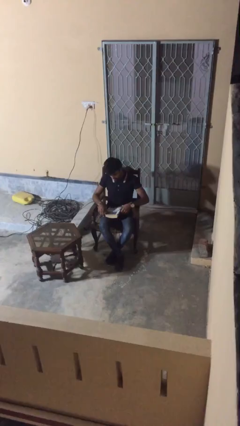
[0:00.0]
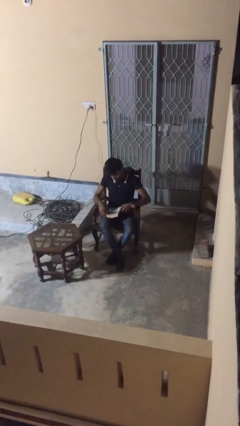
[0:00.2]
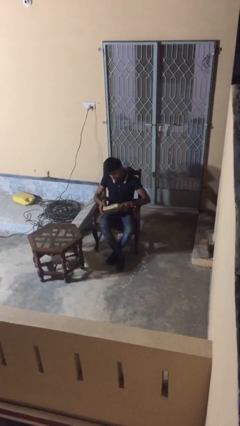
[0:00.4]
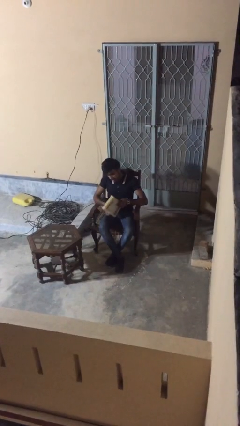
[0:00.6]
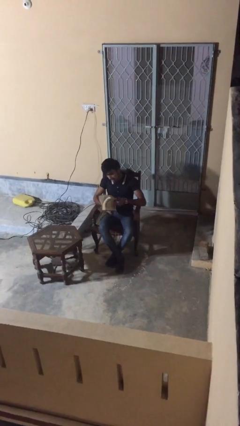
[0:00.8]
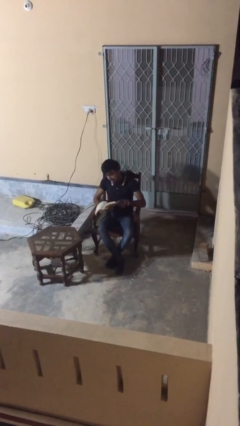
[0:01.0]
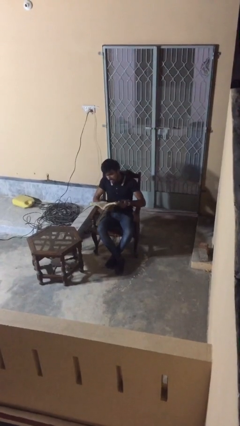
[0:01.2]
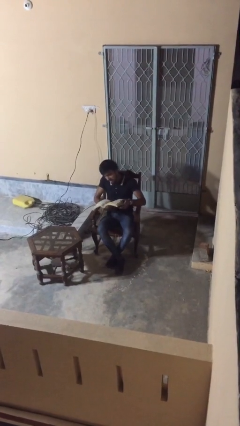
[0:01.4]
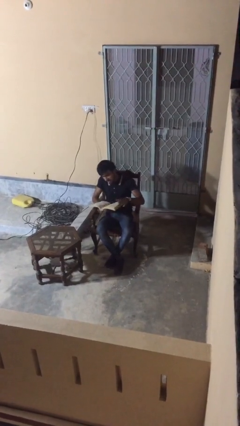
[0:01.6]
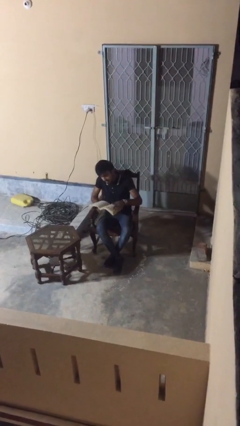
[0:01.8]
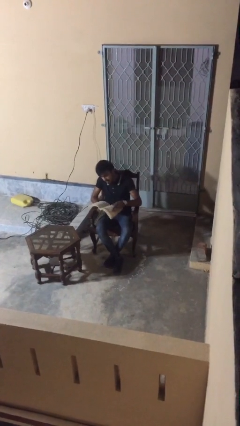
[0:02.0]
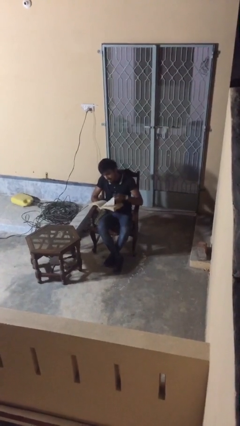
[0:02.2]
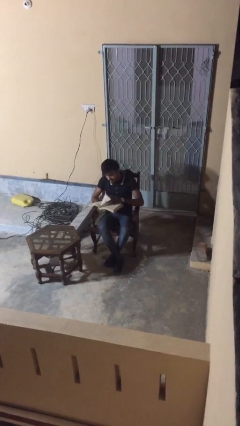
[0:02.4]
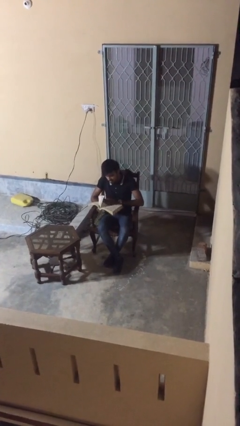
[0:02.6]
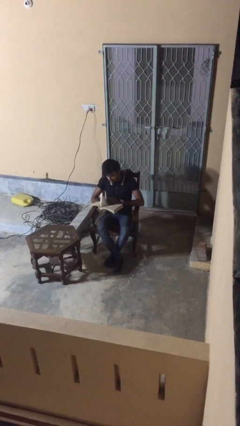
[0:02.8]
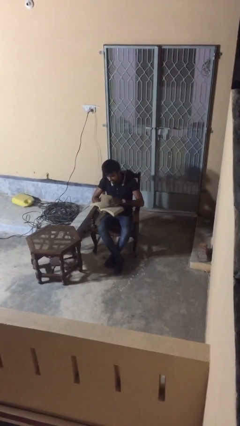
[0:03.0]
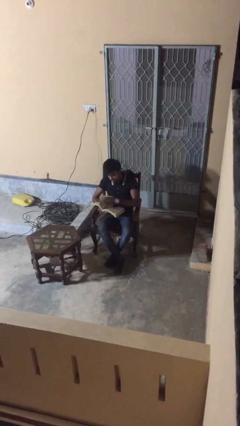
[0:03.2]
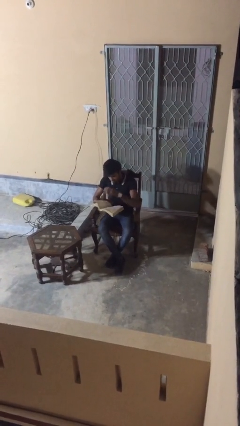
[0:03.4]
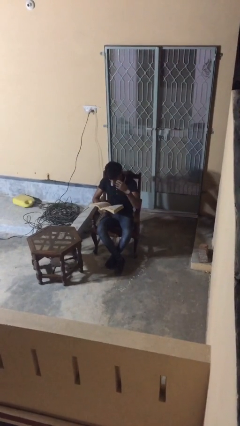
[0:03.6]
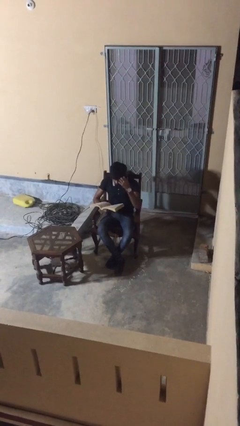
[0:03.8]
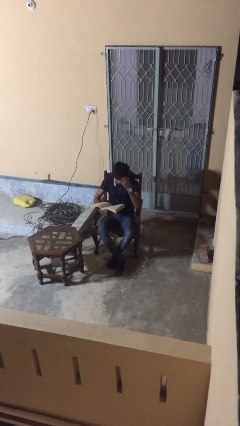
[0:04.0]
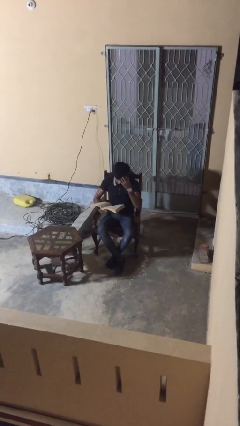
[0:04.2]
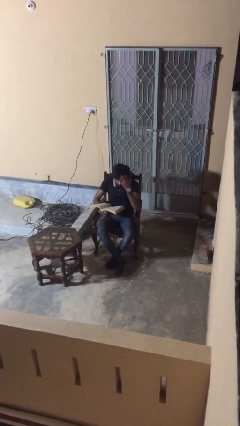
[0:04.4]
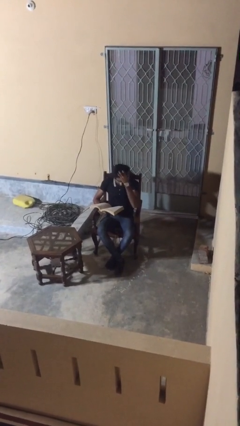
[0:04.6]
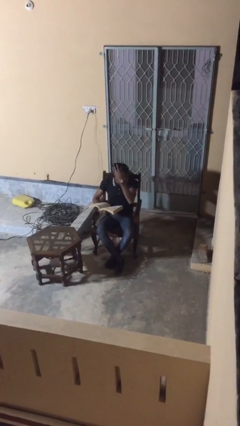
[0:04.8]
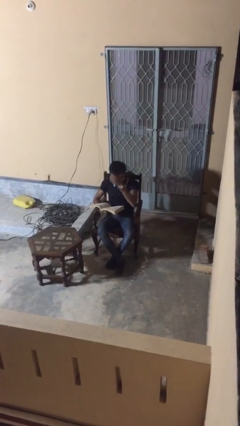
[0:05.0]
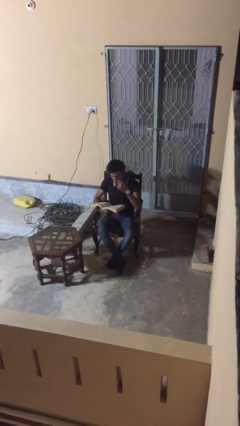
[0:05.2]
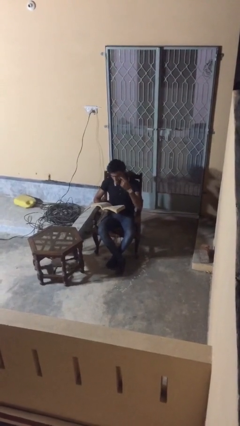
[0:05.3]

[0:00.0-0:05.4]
person reads document

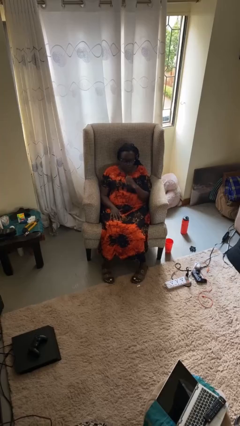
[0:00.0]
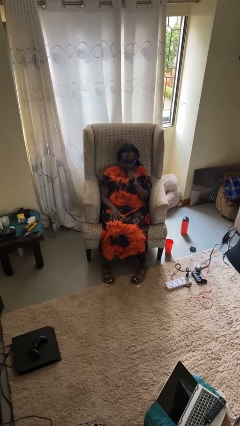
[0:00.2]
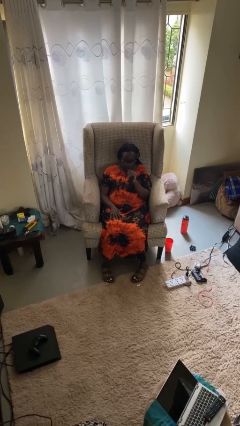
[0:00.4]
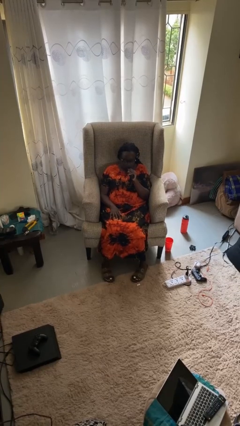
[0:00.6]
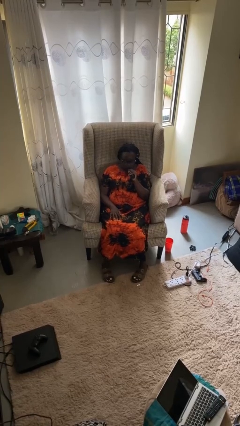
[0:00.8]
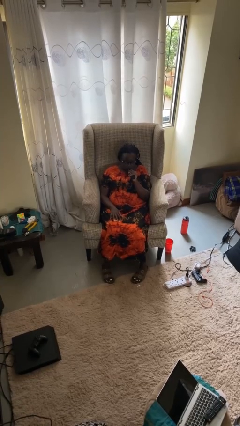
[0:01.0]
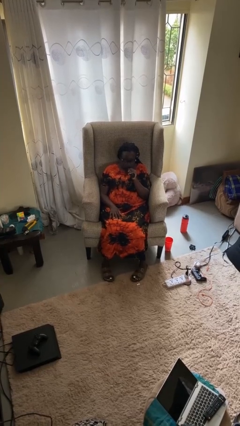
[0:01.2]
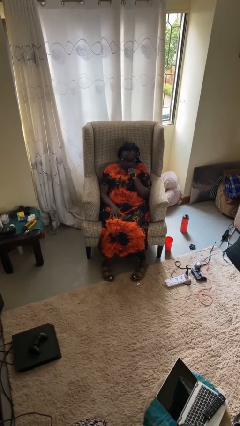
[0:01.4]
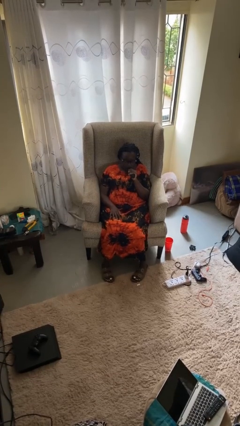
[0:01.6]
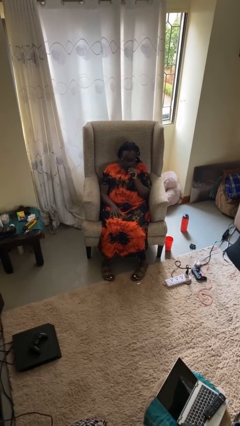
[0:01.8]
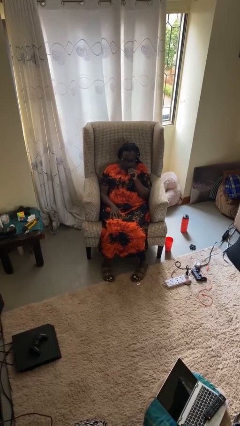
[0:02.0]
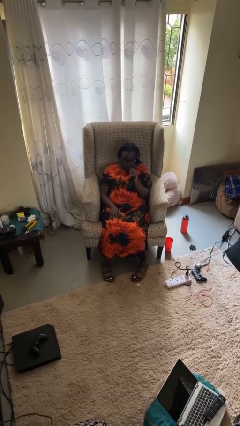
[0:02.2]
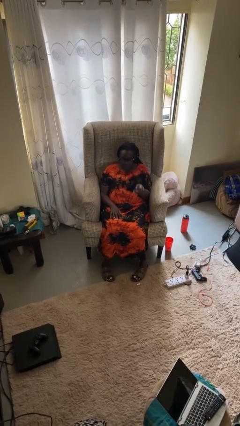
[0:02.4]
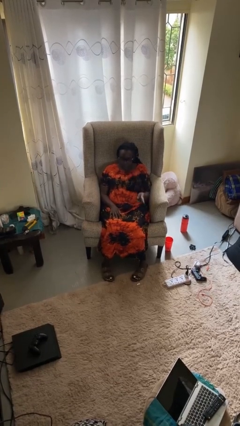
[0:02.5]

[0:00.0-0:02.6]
person vapes

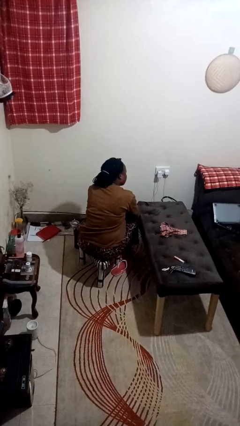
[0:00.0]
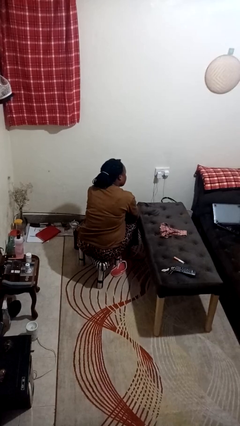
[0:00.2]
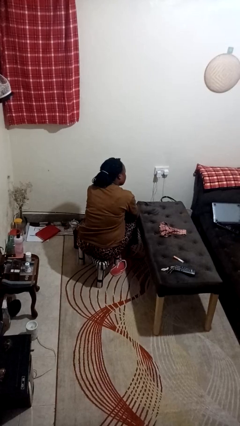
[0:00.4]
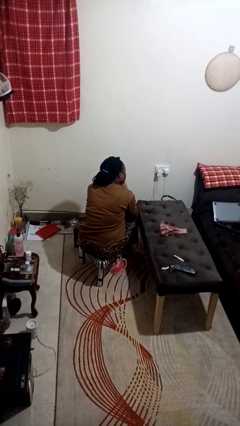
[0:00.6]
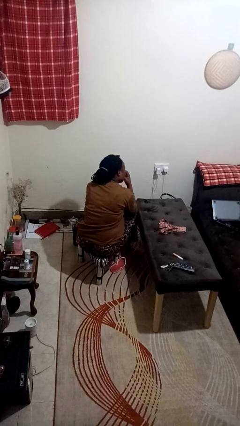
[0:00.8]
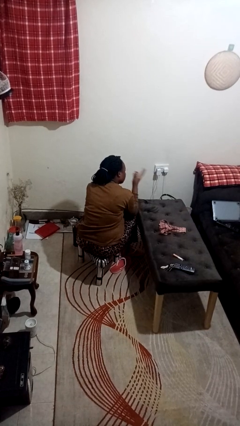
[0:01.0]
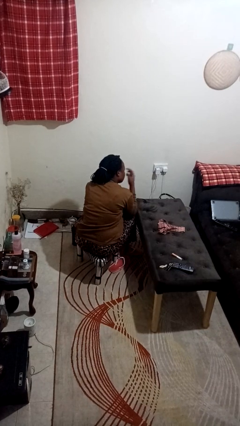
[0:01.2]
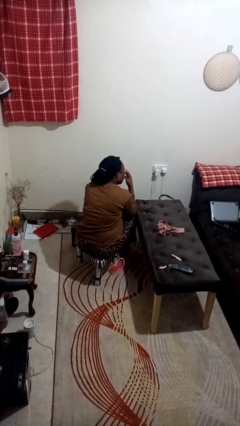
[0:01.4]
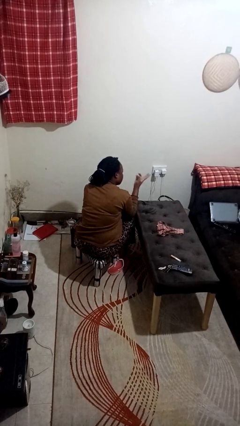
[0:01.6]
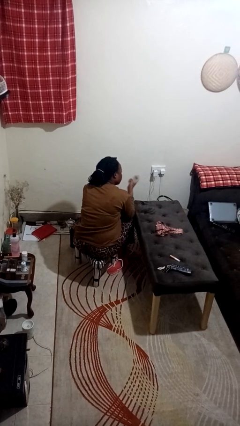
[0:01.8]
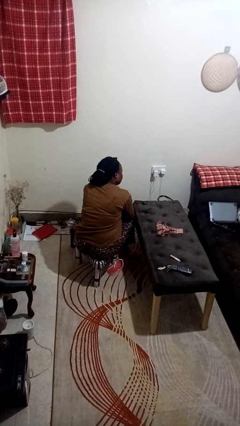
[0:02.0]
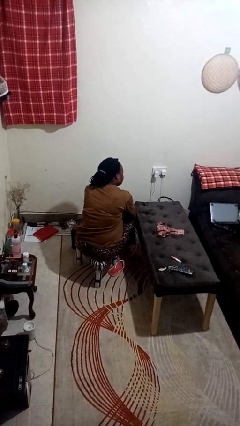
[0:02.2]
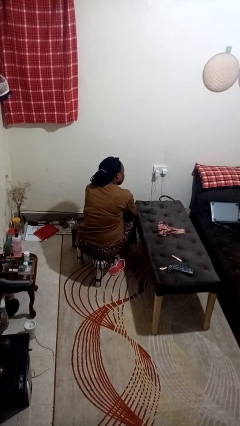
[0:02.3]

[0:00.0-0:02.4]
person gestures watch closely

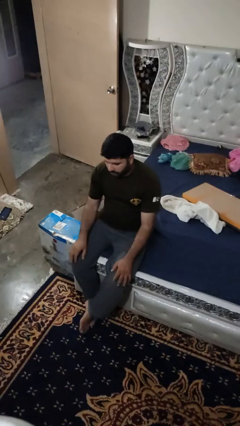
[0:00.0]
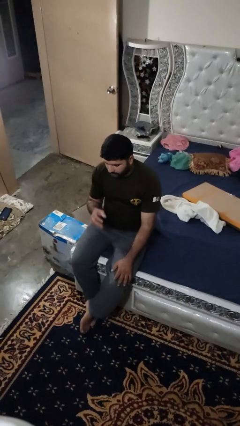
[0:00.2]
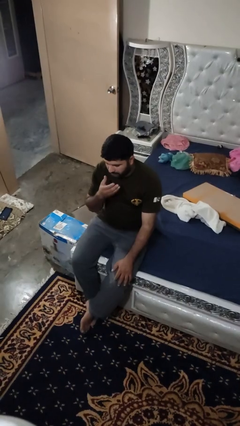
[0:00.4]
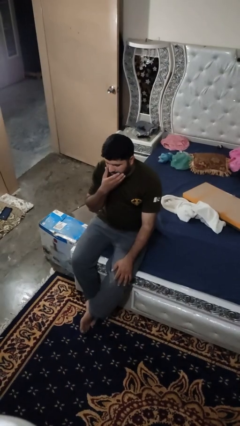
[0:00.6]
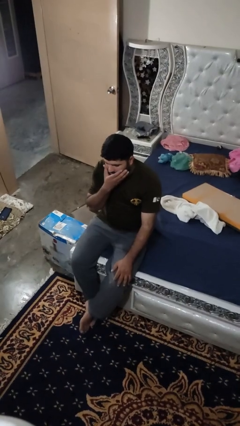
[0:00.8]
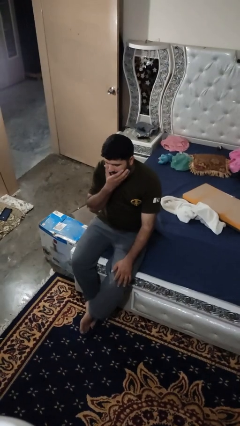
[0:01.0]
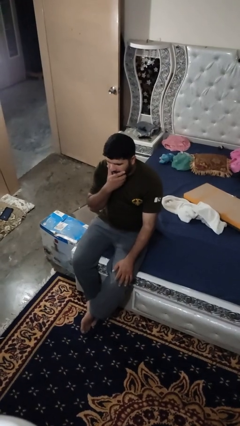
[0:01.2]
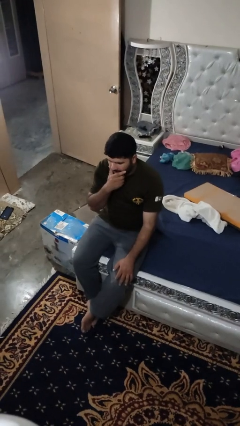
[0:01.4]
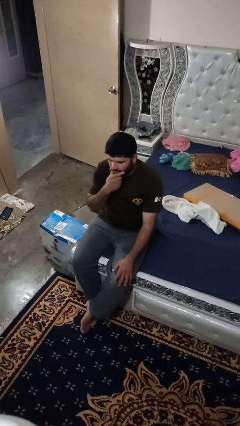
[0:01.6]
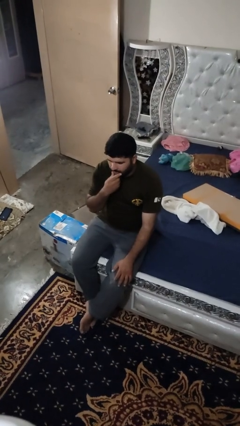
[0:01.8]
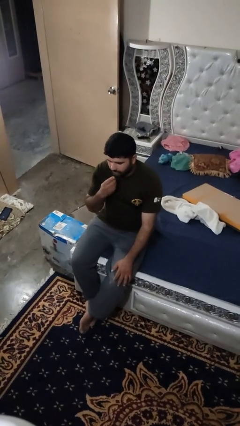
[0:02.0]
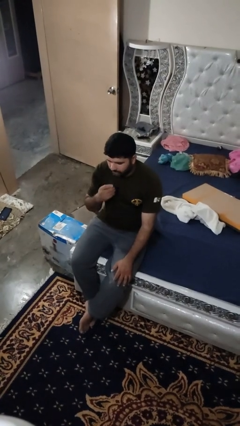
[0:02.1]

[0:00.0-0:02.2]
person strokes chin

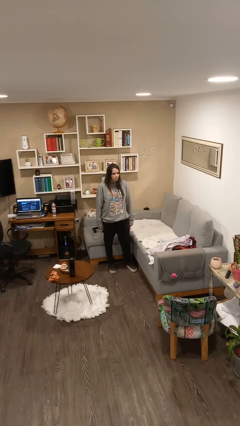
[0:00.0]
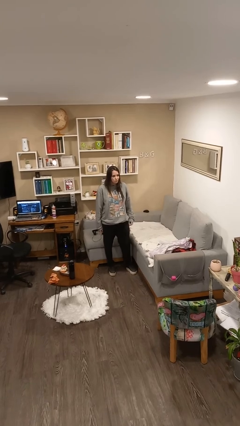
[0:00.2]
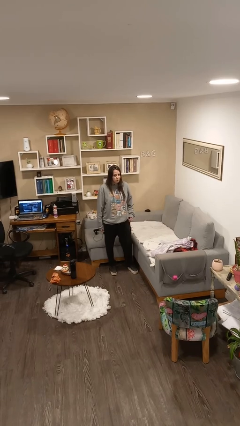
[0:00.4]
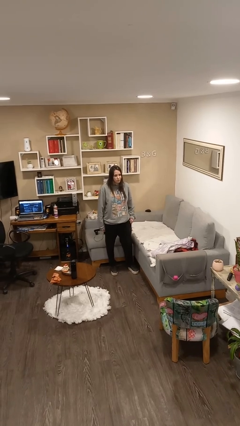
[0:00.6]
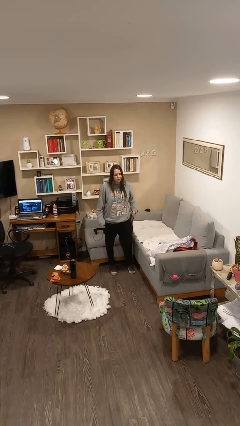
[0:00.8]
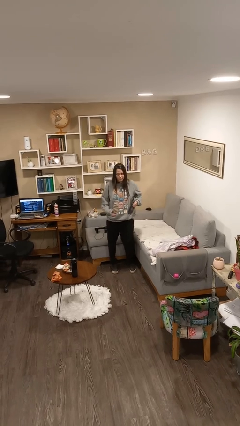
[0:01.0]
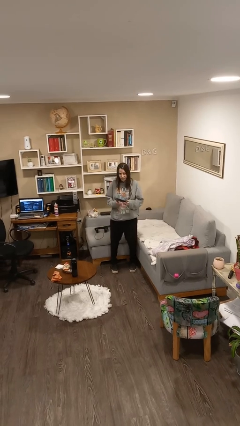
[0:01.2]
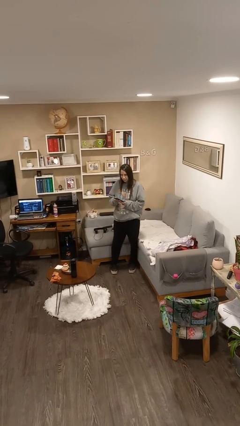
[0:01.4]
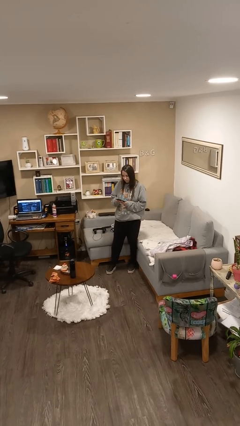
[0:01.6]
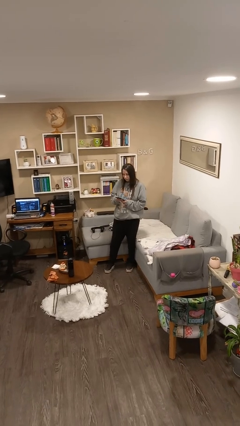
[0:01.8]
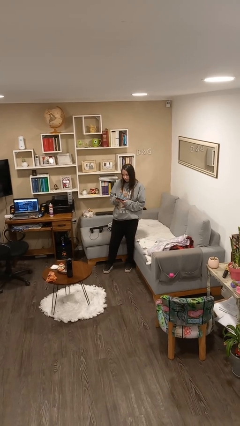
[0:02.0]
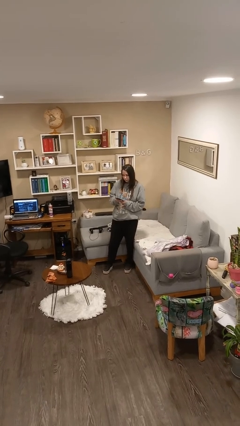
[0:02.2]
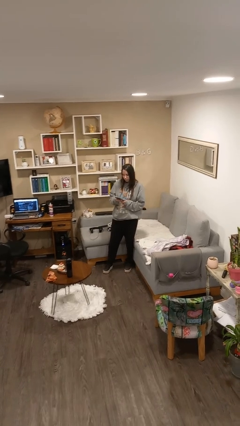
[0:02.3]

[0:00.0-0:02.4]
person takes phone from pocket

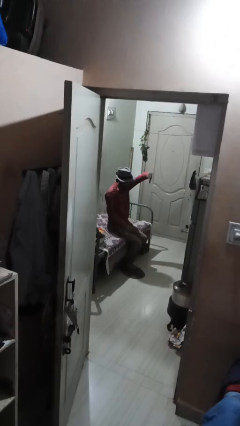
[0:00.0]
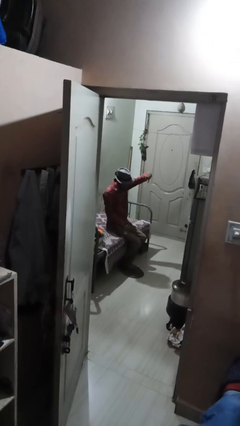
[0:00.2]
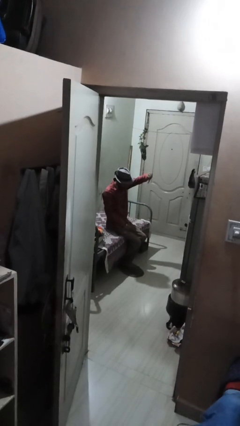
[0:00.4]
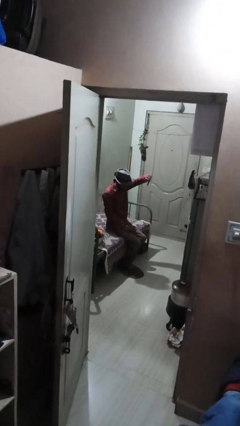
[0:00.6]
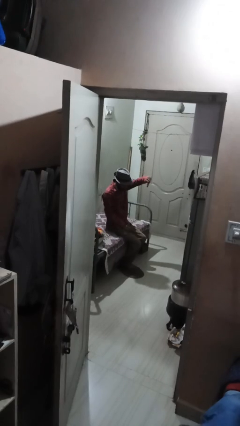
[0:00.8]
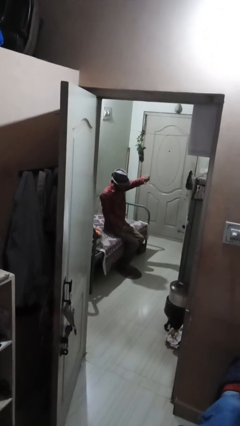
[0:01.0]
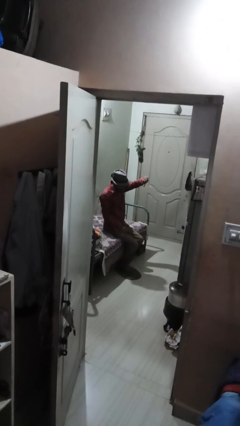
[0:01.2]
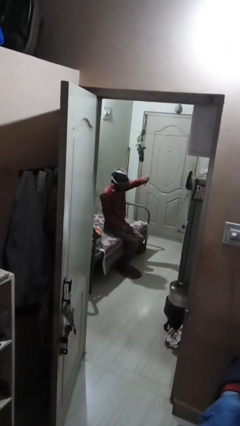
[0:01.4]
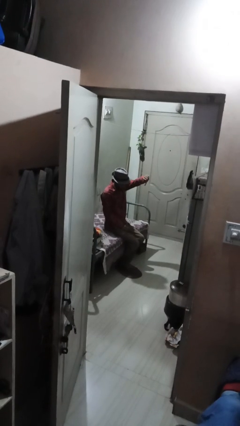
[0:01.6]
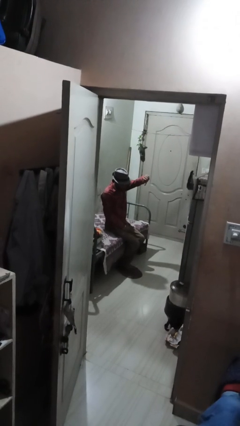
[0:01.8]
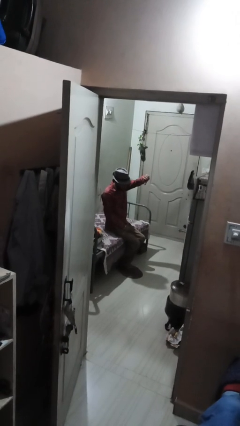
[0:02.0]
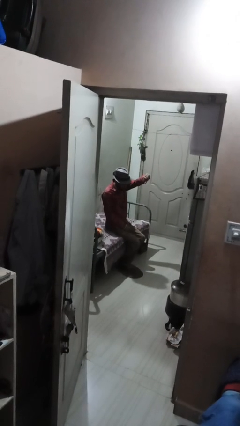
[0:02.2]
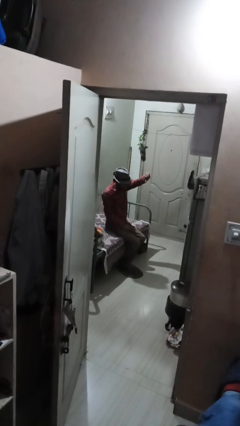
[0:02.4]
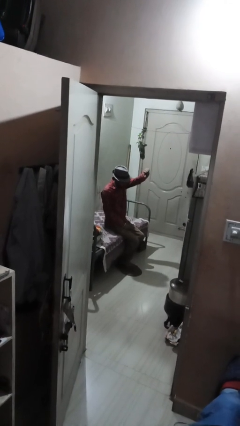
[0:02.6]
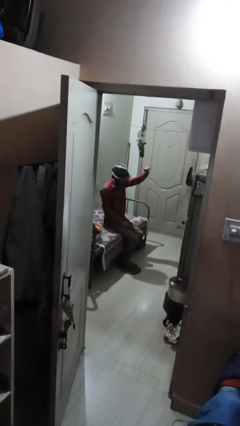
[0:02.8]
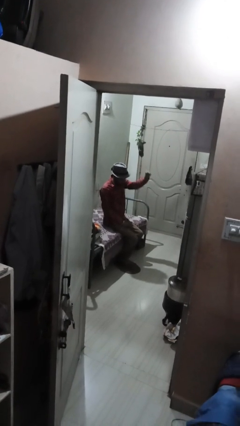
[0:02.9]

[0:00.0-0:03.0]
person gestures thumbs down
